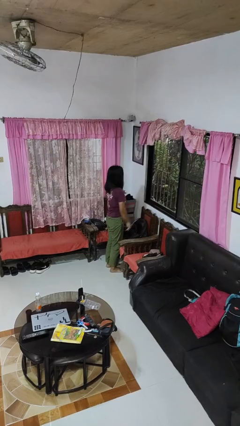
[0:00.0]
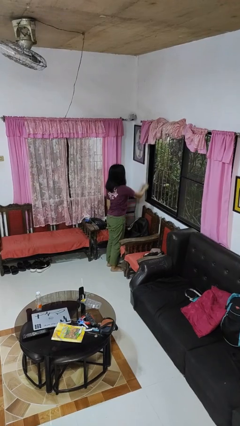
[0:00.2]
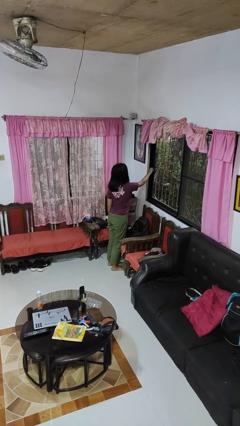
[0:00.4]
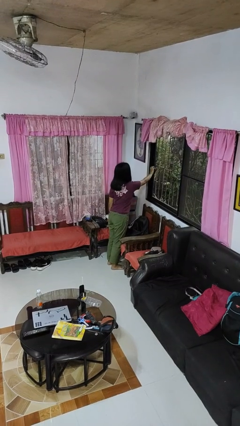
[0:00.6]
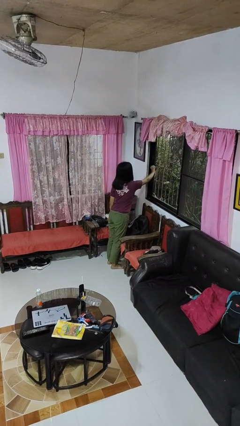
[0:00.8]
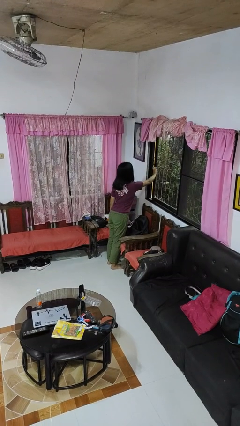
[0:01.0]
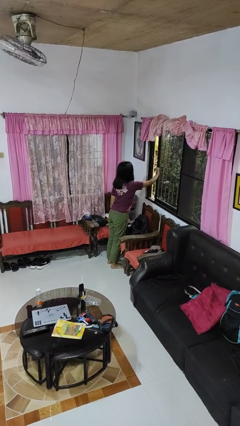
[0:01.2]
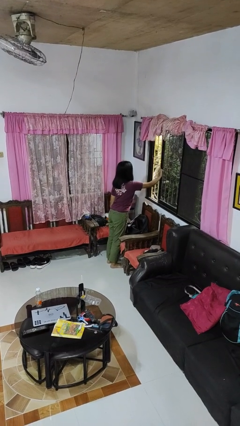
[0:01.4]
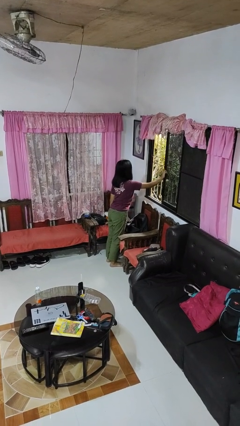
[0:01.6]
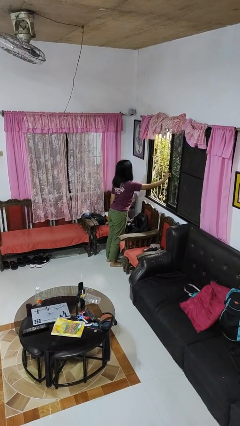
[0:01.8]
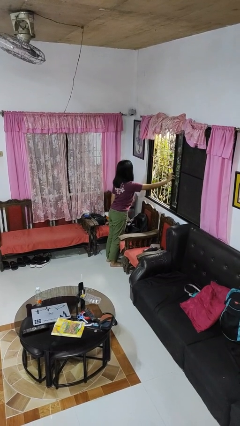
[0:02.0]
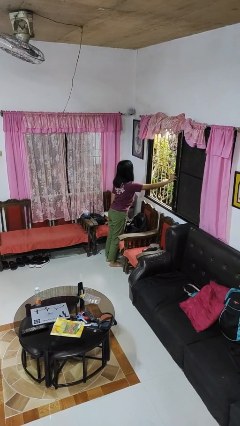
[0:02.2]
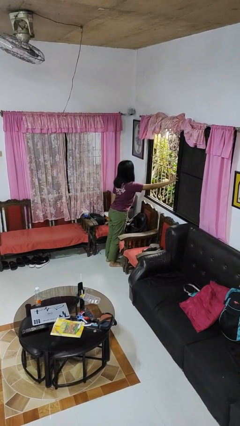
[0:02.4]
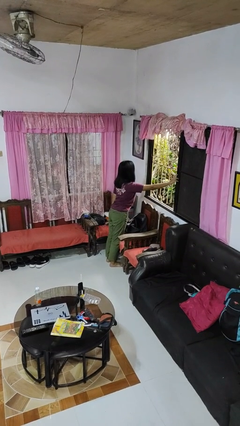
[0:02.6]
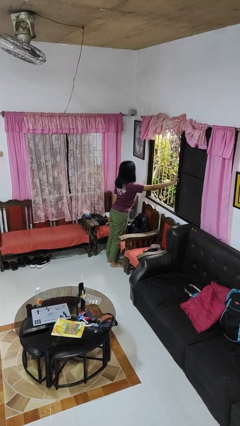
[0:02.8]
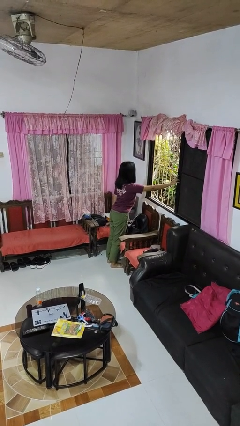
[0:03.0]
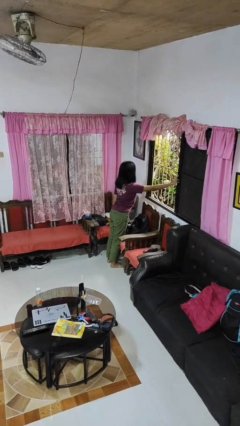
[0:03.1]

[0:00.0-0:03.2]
person opens home window

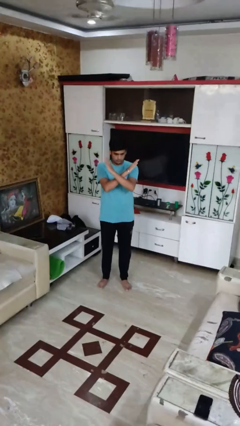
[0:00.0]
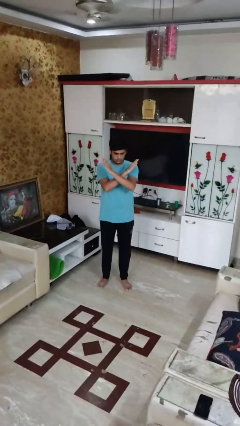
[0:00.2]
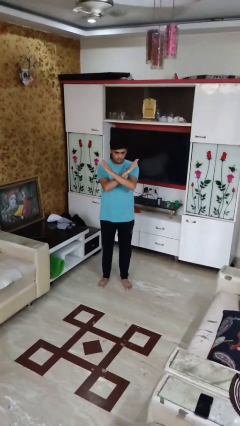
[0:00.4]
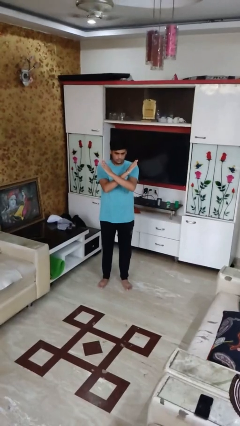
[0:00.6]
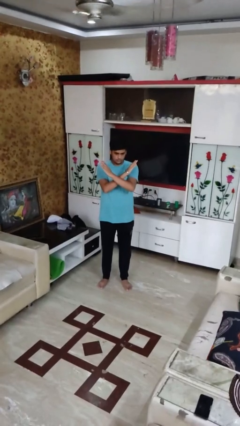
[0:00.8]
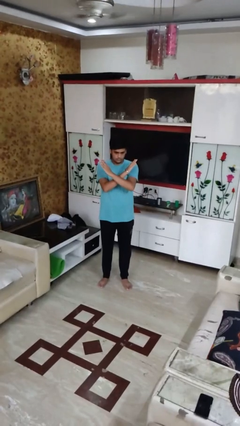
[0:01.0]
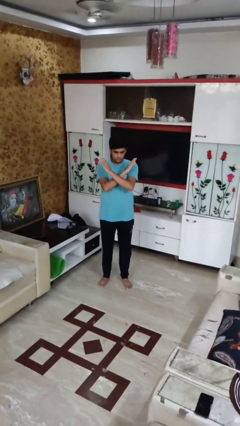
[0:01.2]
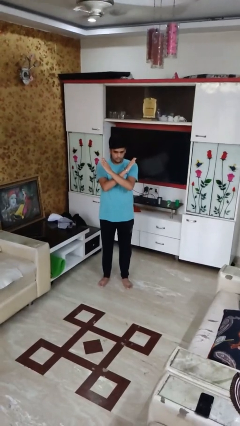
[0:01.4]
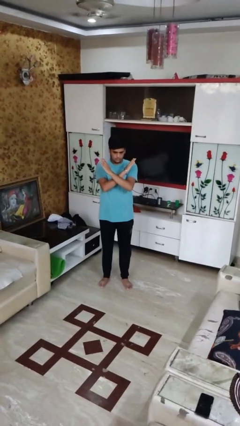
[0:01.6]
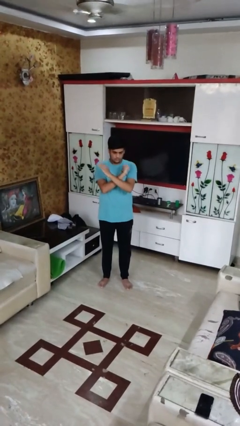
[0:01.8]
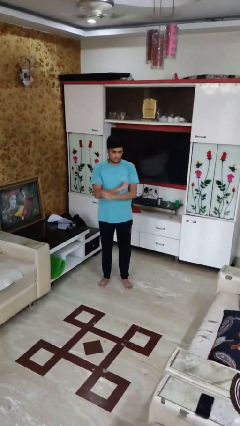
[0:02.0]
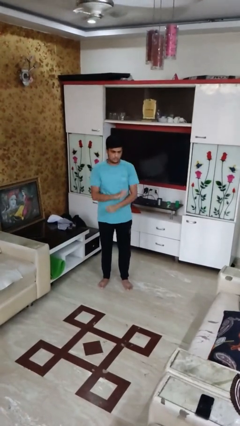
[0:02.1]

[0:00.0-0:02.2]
person gestures arms x

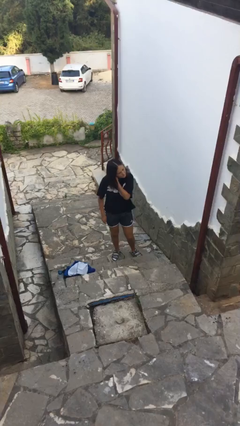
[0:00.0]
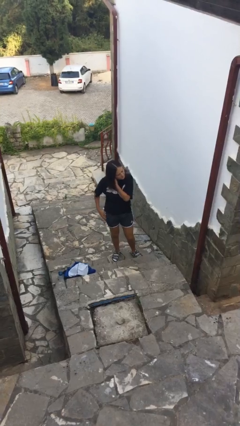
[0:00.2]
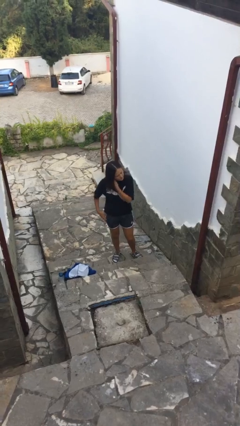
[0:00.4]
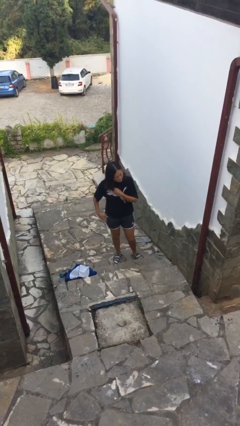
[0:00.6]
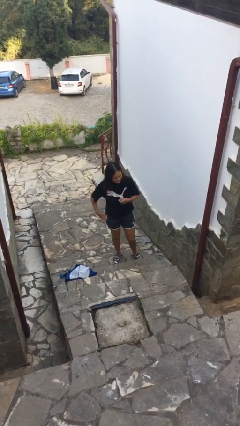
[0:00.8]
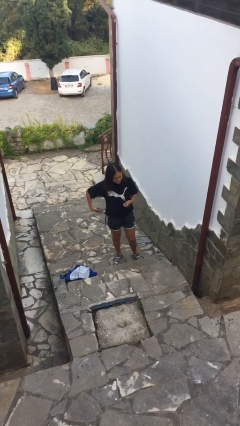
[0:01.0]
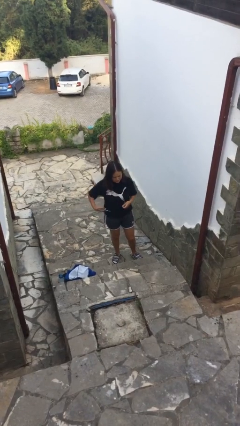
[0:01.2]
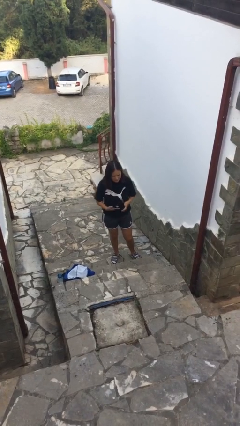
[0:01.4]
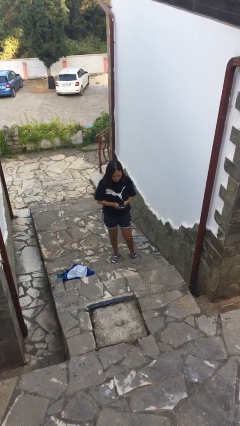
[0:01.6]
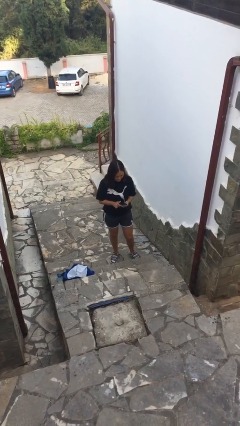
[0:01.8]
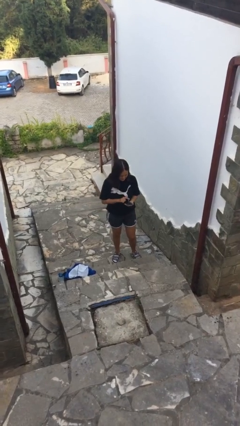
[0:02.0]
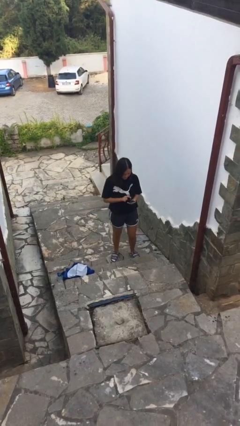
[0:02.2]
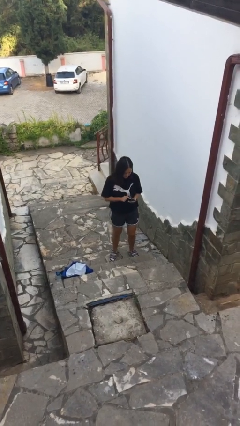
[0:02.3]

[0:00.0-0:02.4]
person takes phone from pocket

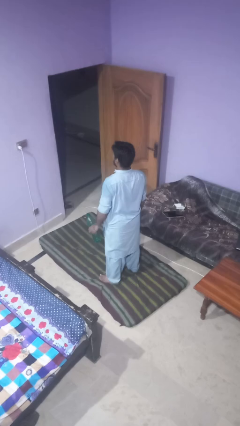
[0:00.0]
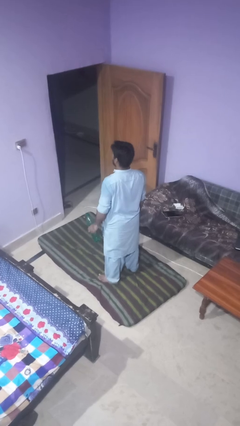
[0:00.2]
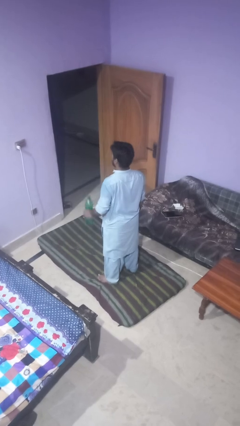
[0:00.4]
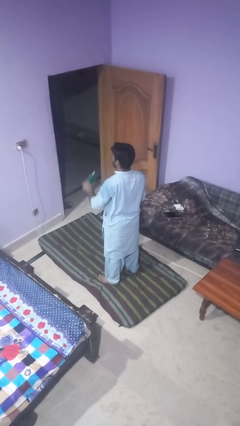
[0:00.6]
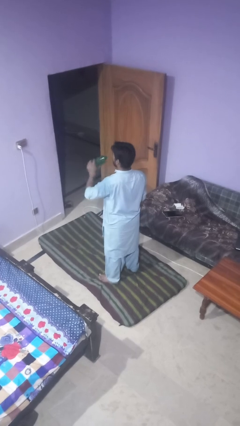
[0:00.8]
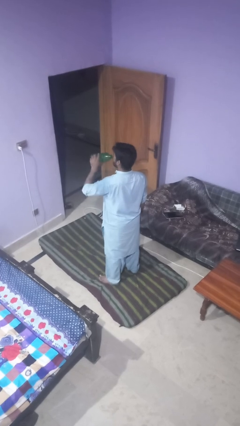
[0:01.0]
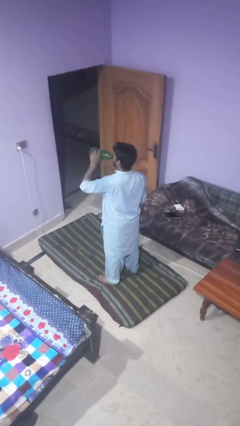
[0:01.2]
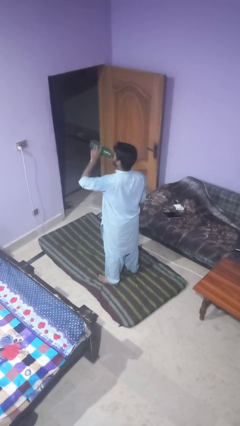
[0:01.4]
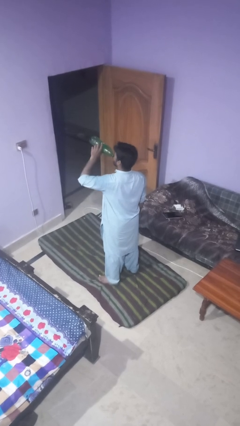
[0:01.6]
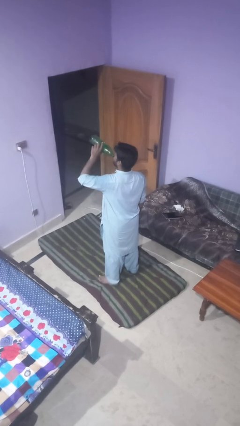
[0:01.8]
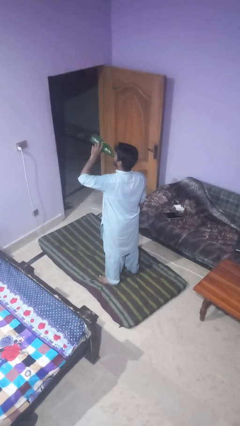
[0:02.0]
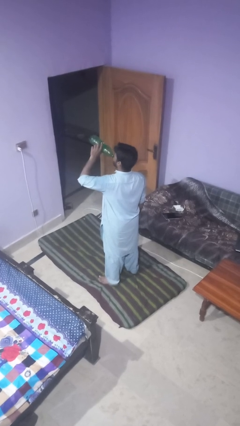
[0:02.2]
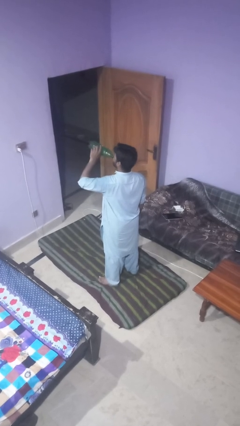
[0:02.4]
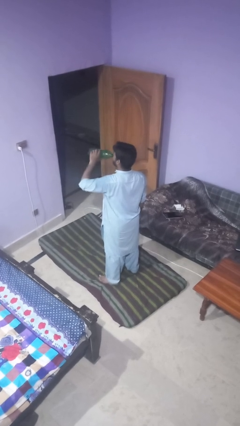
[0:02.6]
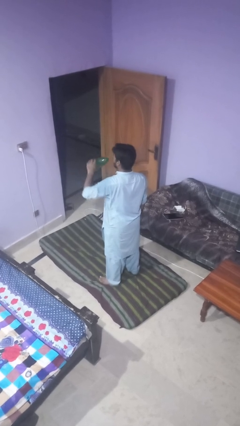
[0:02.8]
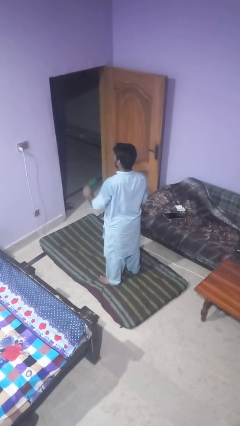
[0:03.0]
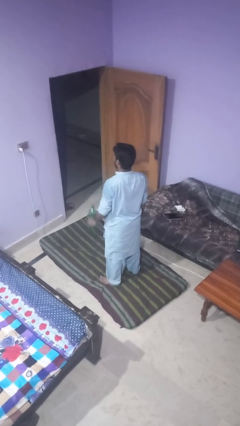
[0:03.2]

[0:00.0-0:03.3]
person drinks from bottle

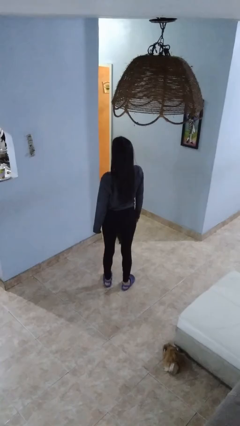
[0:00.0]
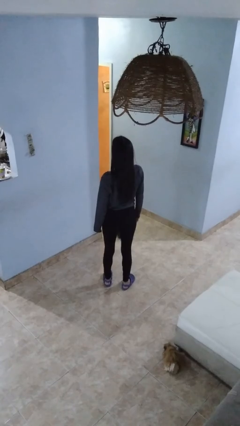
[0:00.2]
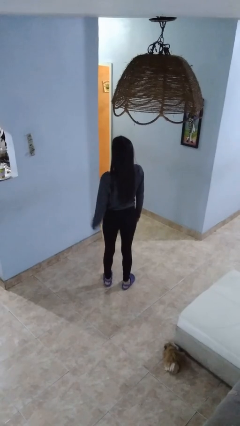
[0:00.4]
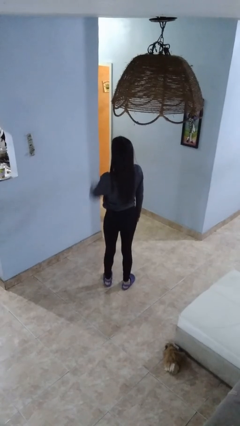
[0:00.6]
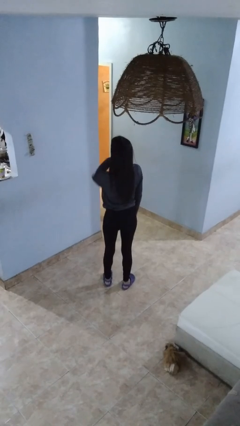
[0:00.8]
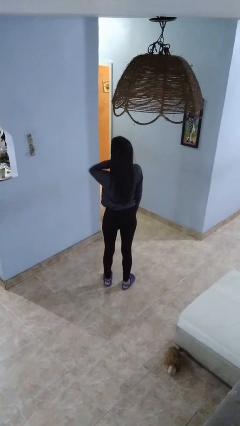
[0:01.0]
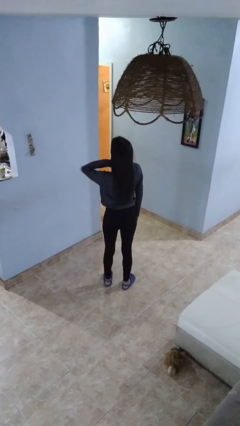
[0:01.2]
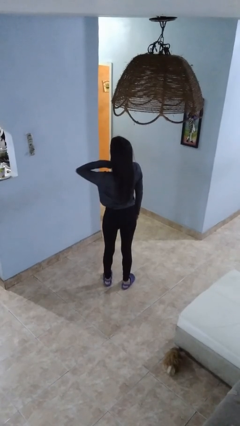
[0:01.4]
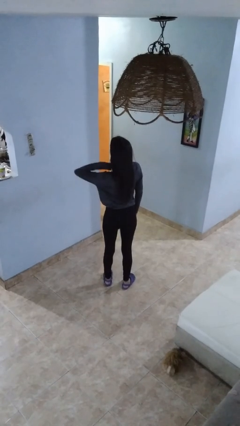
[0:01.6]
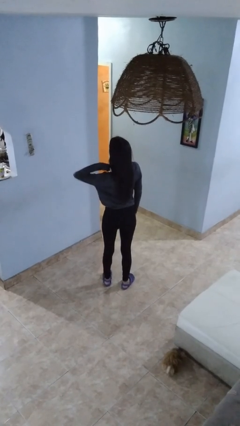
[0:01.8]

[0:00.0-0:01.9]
person gestures cut

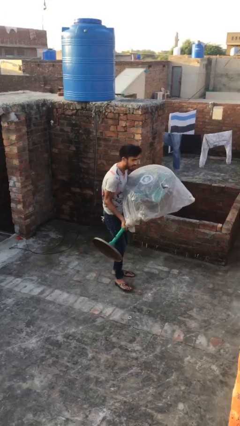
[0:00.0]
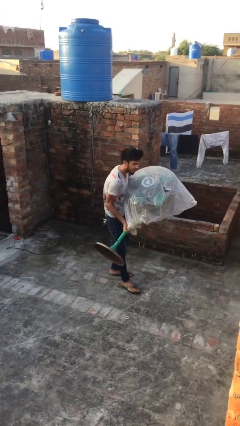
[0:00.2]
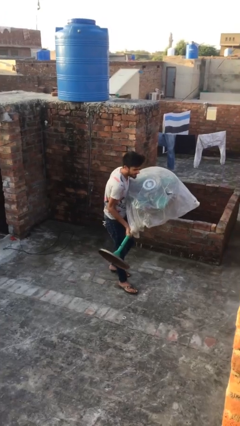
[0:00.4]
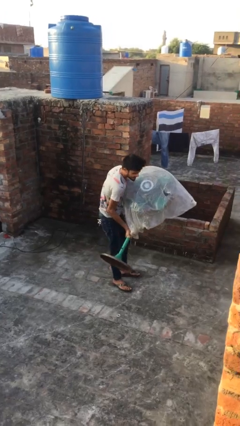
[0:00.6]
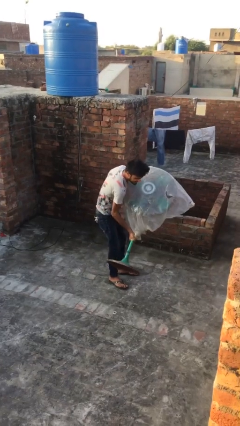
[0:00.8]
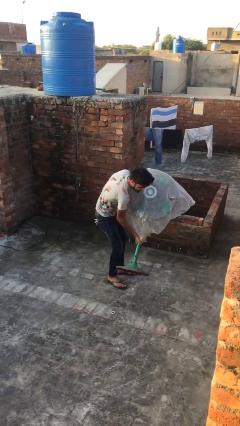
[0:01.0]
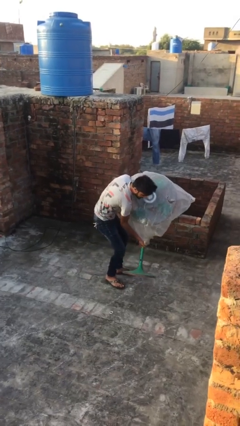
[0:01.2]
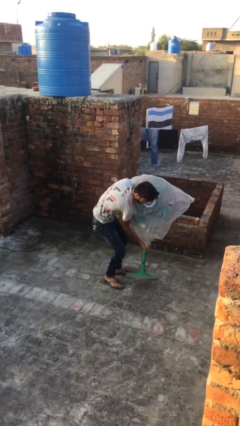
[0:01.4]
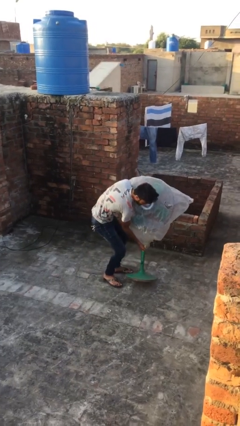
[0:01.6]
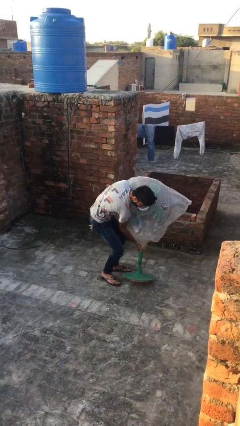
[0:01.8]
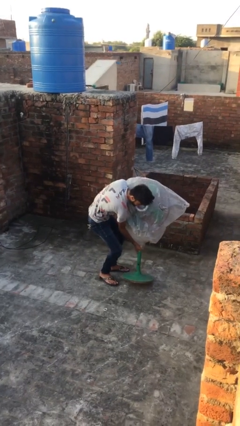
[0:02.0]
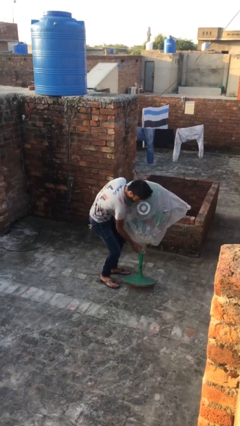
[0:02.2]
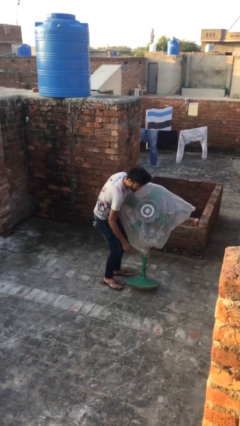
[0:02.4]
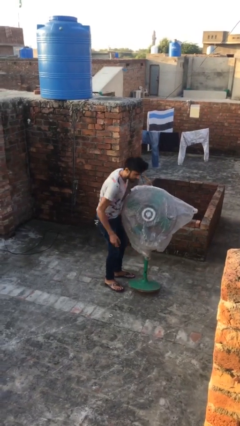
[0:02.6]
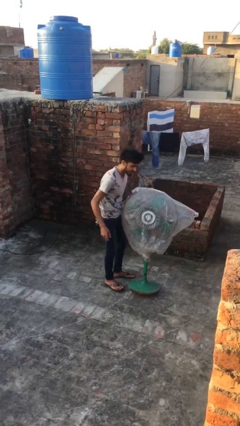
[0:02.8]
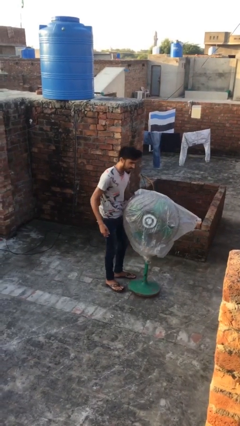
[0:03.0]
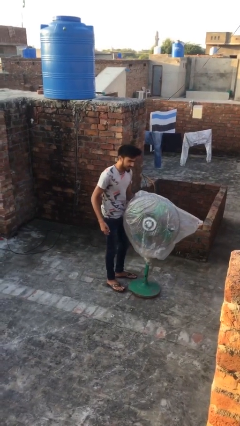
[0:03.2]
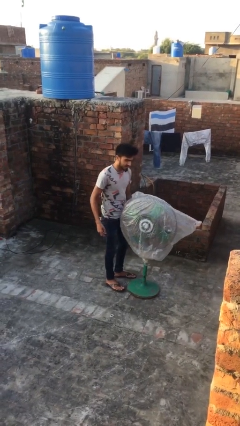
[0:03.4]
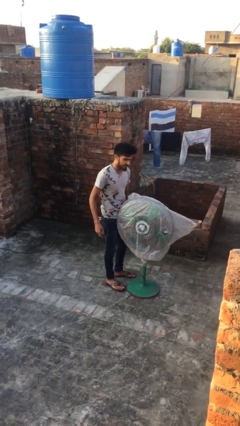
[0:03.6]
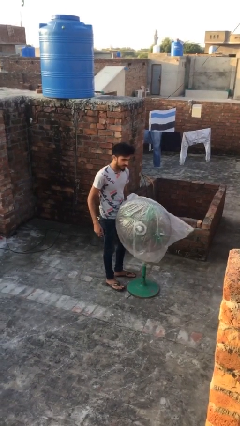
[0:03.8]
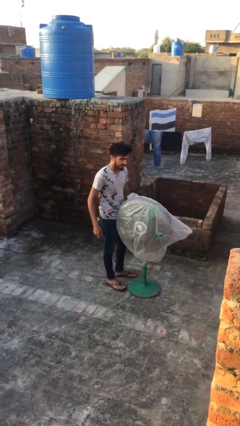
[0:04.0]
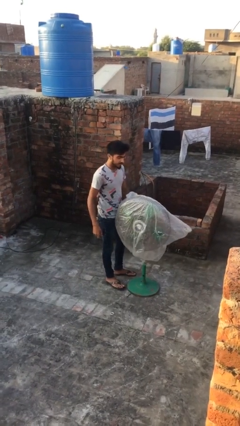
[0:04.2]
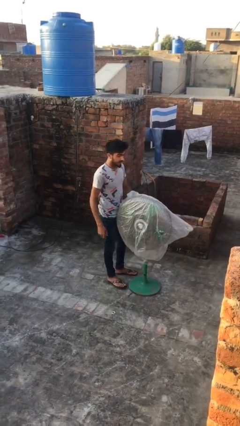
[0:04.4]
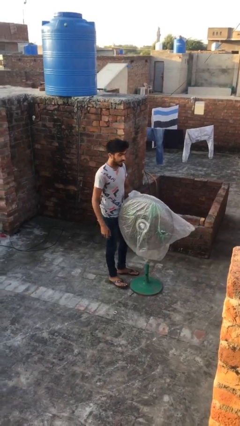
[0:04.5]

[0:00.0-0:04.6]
person puts down object on floor
